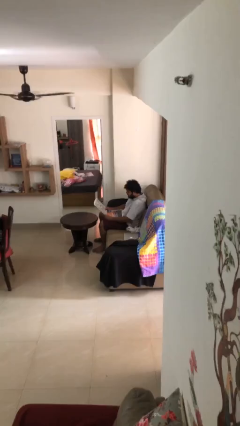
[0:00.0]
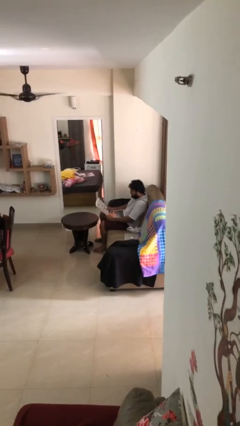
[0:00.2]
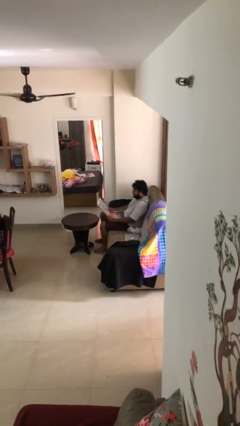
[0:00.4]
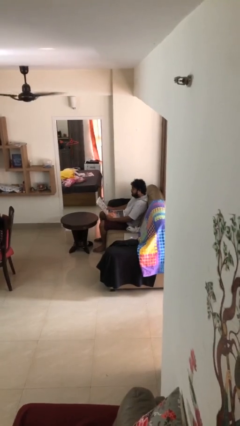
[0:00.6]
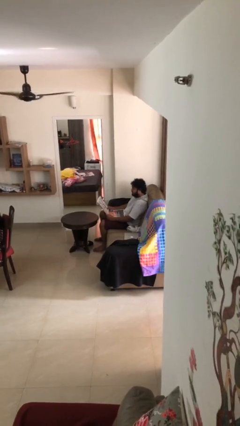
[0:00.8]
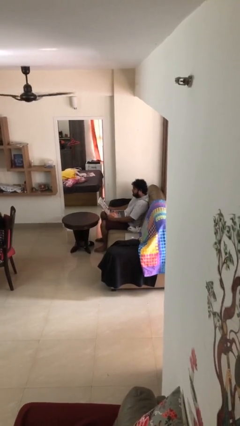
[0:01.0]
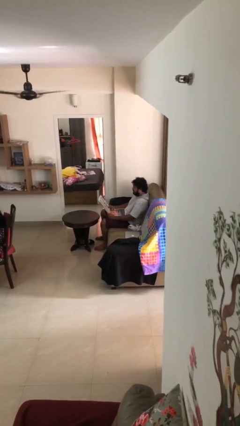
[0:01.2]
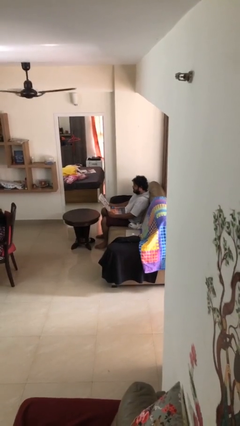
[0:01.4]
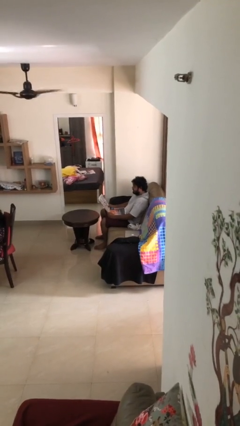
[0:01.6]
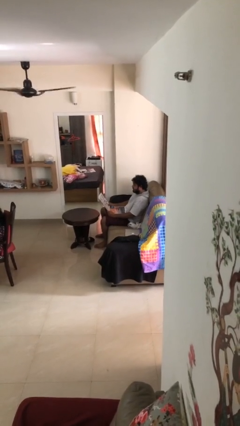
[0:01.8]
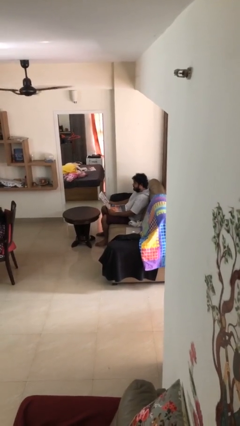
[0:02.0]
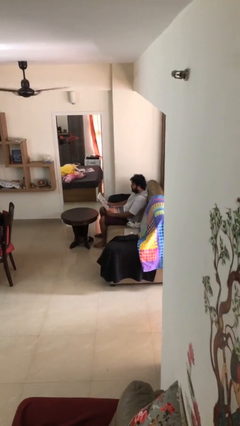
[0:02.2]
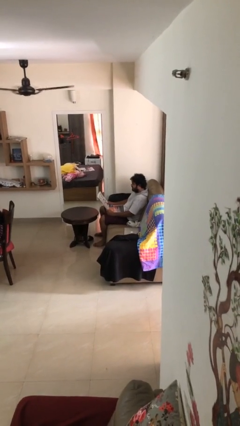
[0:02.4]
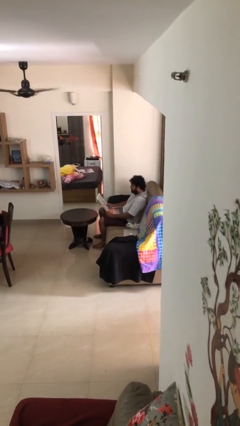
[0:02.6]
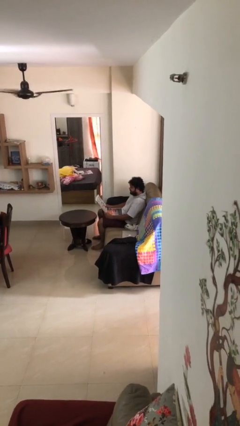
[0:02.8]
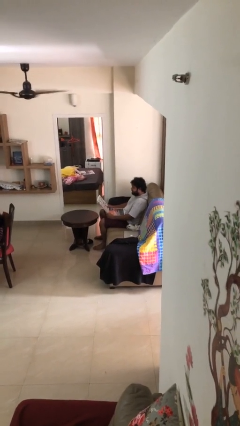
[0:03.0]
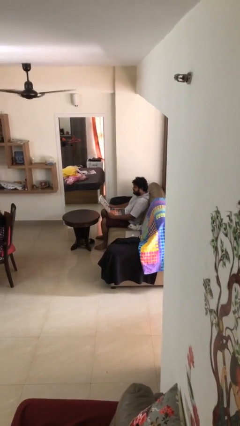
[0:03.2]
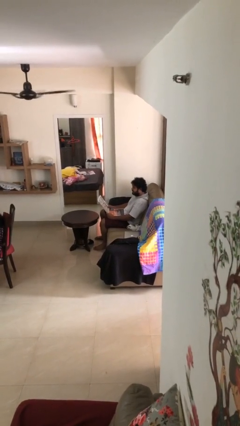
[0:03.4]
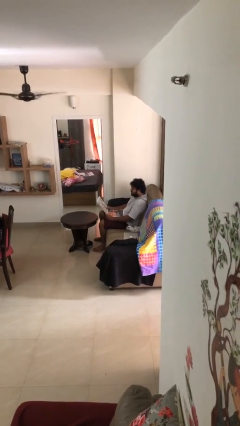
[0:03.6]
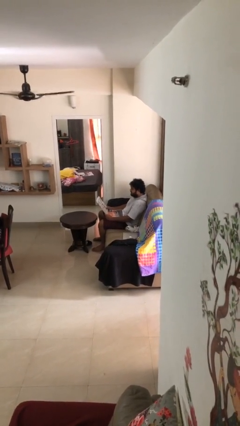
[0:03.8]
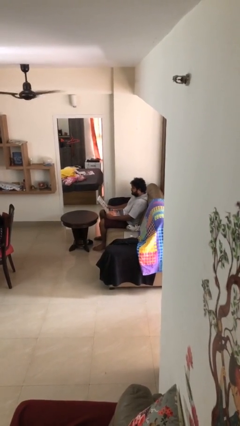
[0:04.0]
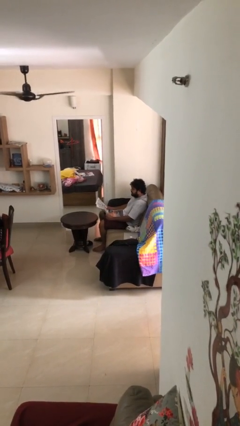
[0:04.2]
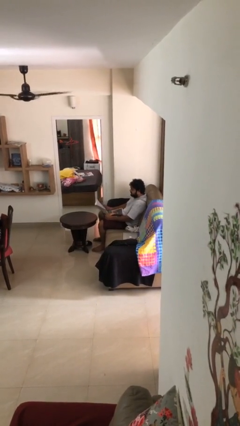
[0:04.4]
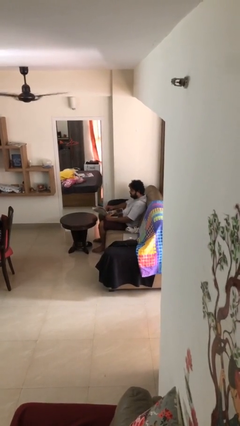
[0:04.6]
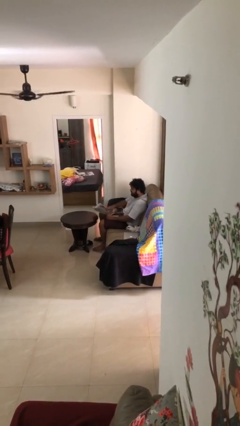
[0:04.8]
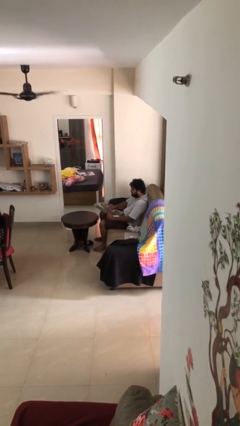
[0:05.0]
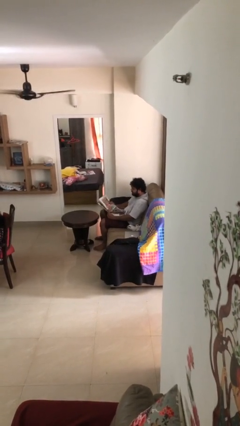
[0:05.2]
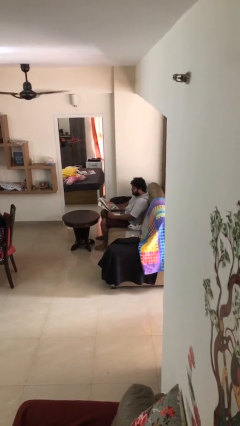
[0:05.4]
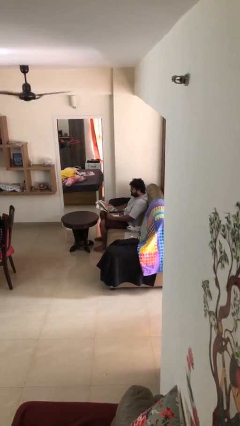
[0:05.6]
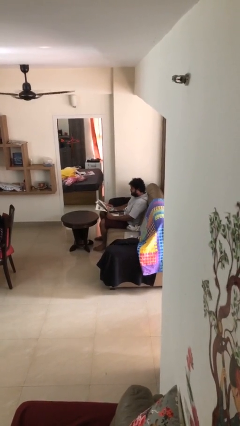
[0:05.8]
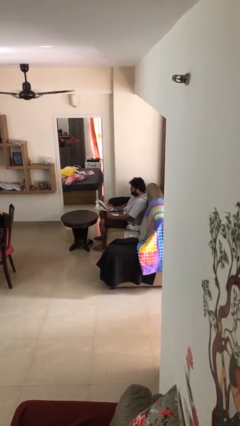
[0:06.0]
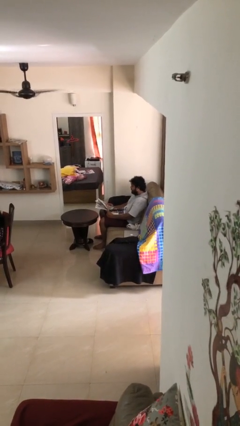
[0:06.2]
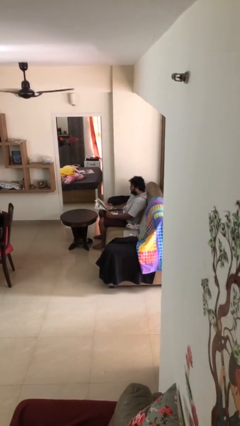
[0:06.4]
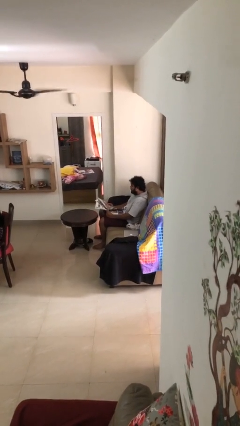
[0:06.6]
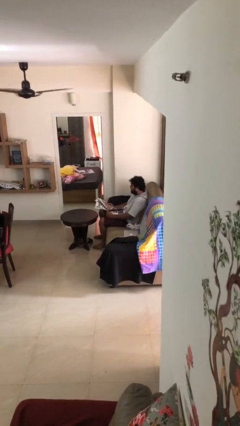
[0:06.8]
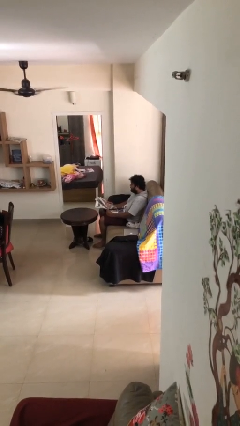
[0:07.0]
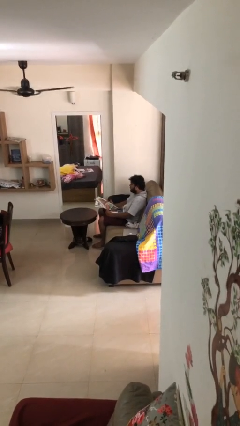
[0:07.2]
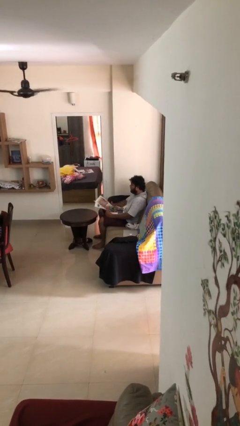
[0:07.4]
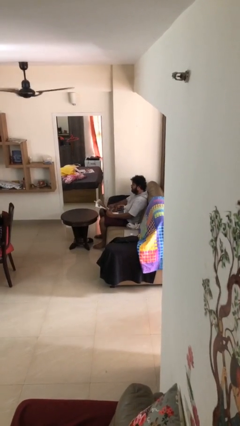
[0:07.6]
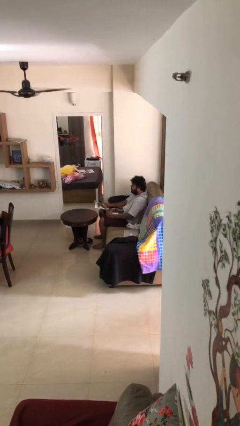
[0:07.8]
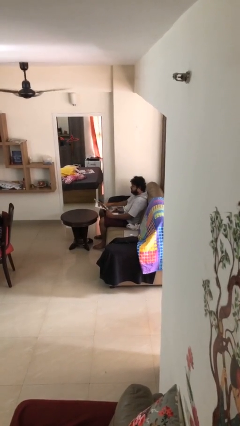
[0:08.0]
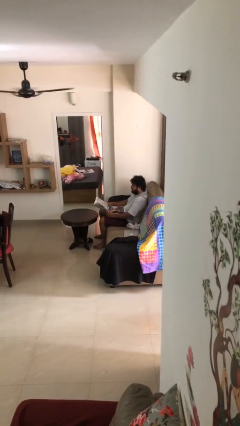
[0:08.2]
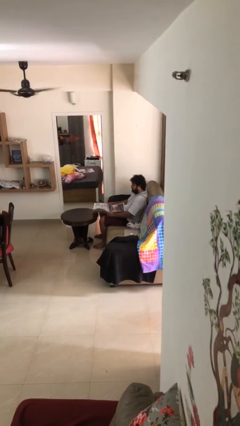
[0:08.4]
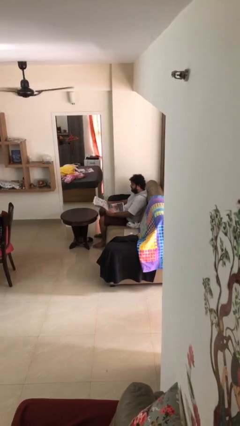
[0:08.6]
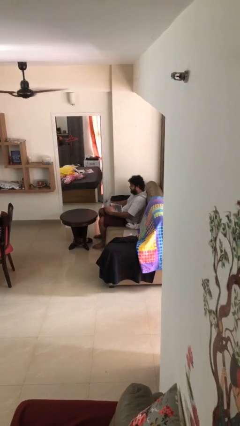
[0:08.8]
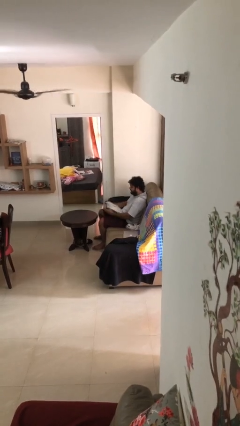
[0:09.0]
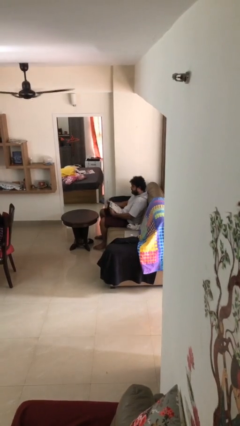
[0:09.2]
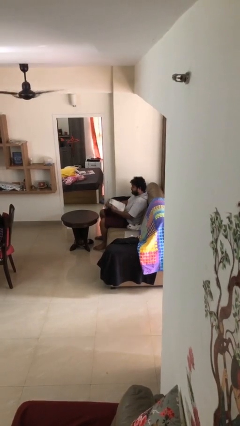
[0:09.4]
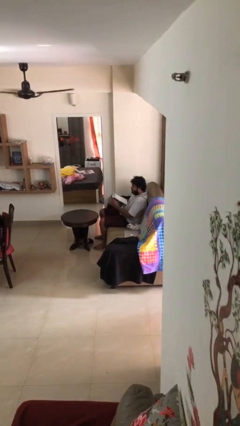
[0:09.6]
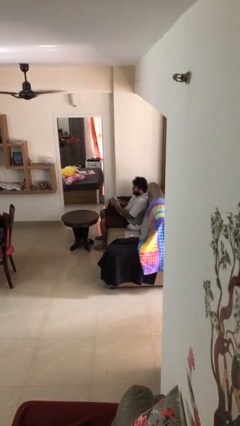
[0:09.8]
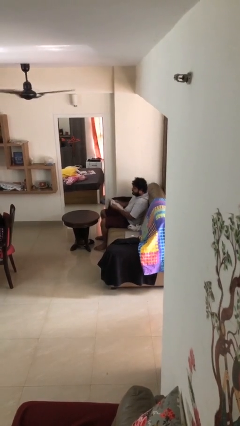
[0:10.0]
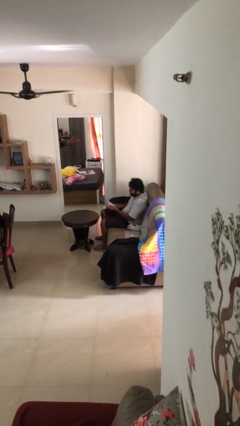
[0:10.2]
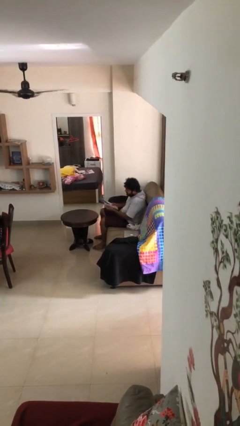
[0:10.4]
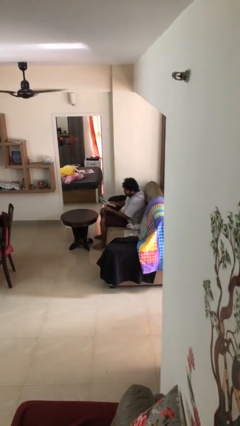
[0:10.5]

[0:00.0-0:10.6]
person reads document

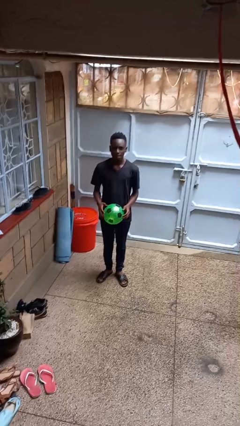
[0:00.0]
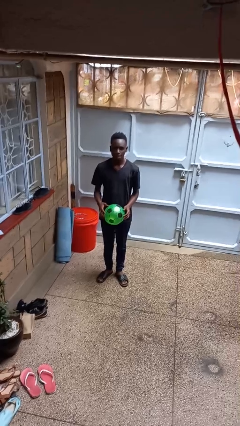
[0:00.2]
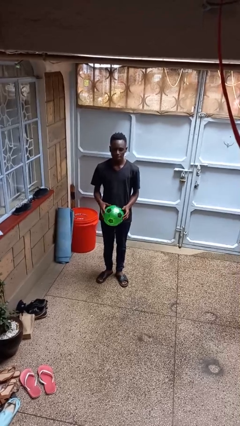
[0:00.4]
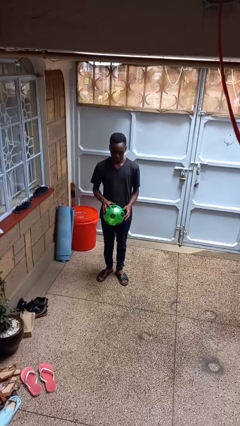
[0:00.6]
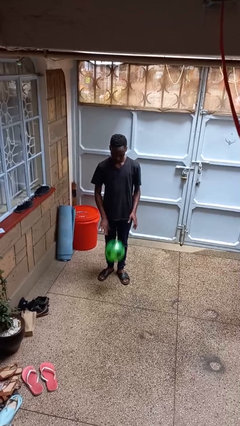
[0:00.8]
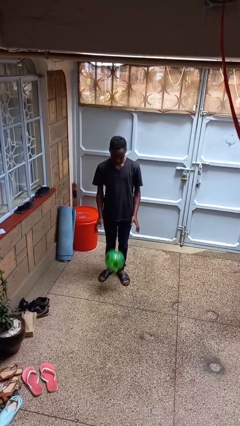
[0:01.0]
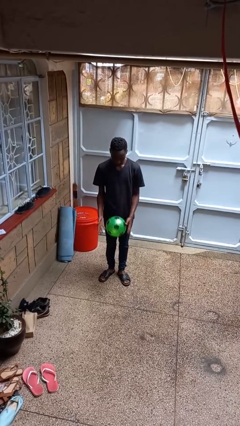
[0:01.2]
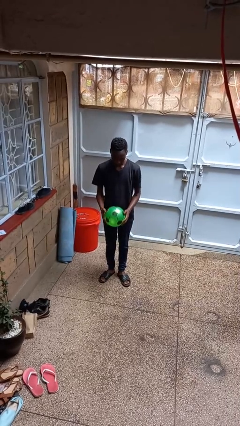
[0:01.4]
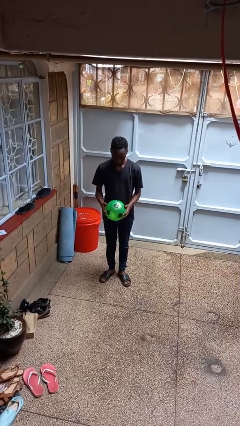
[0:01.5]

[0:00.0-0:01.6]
person bounces ball on floor

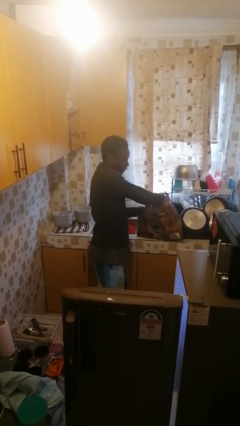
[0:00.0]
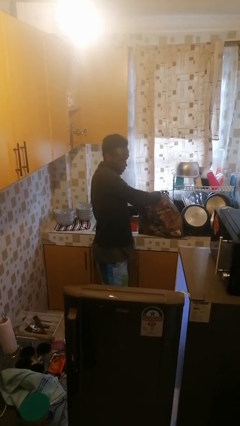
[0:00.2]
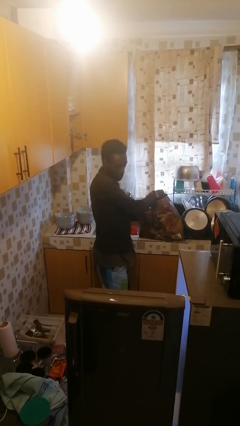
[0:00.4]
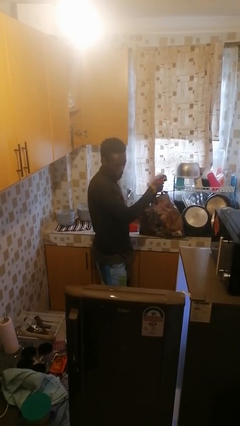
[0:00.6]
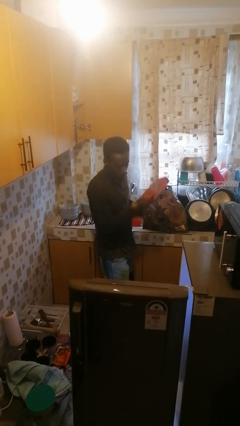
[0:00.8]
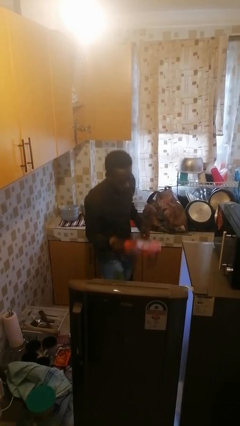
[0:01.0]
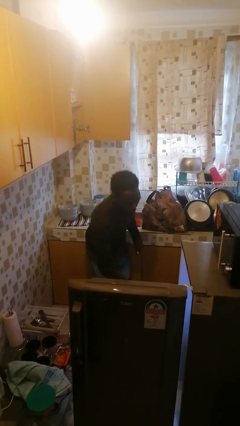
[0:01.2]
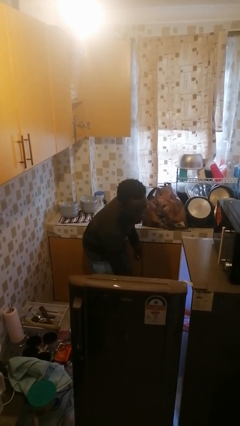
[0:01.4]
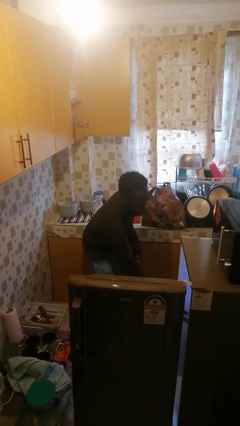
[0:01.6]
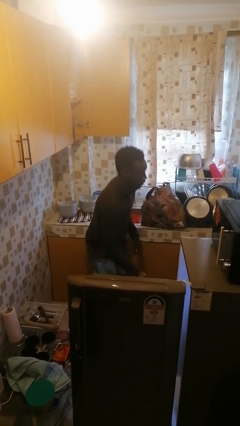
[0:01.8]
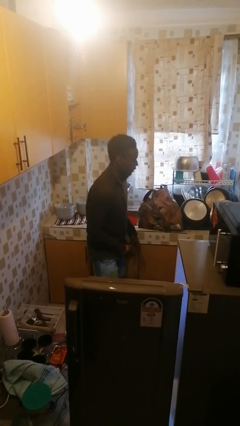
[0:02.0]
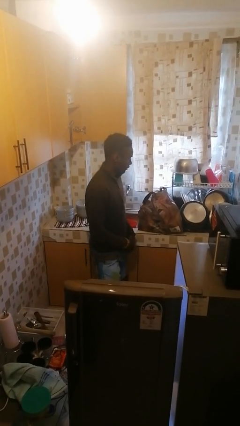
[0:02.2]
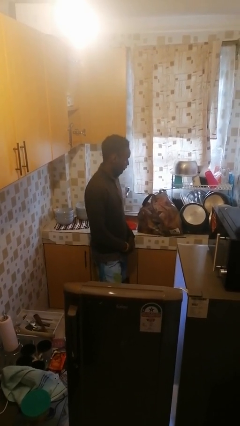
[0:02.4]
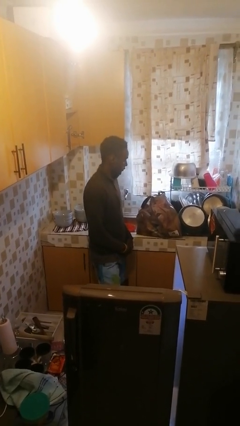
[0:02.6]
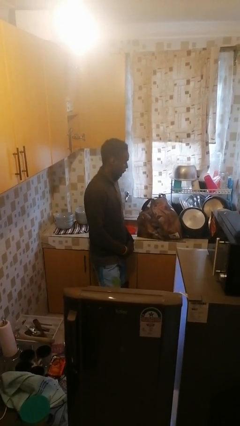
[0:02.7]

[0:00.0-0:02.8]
person loads groceries into refrigerator

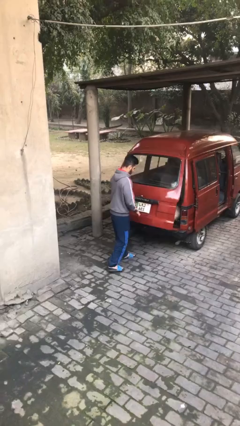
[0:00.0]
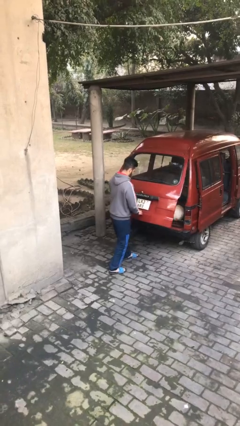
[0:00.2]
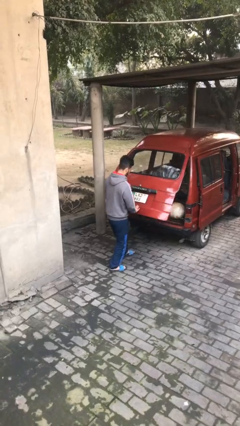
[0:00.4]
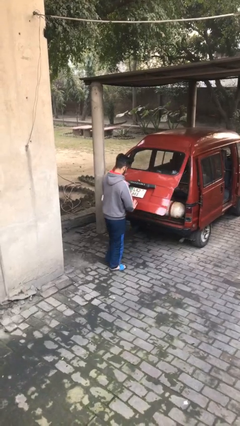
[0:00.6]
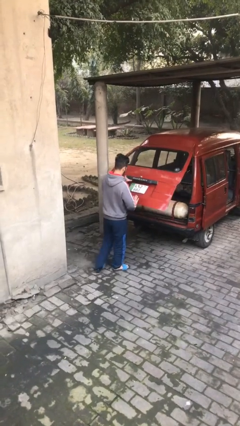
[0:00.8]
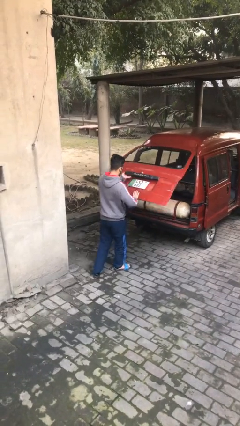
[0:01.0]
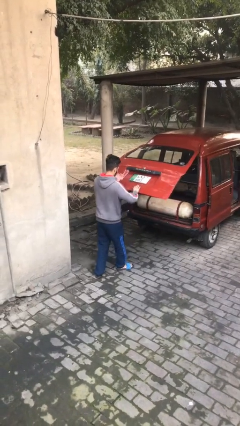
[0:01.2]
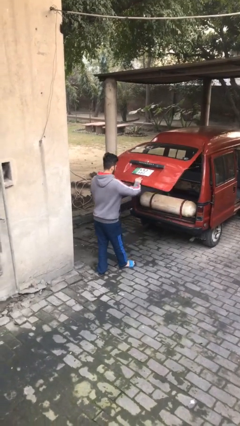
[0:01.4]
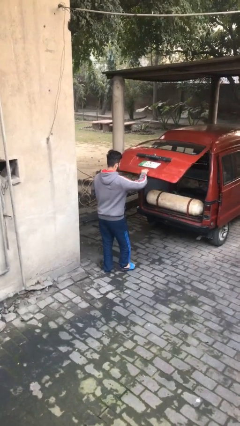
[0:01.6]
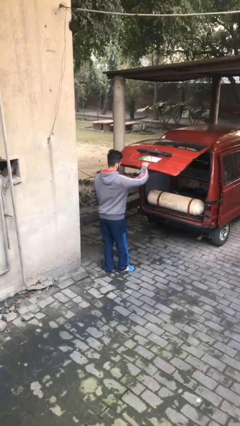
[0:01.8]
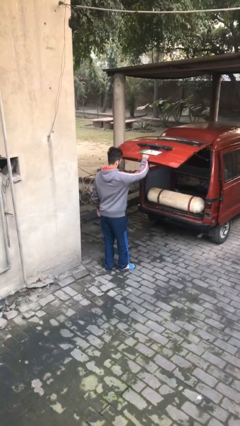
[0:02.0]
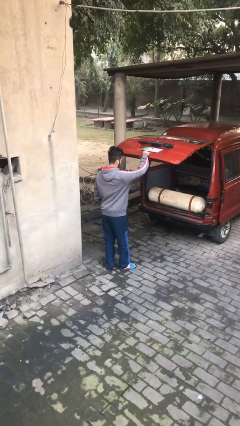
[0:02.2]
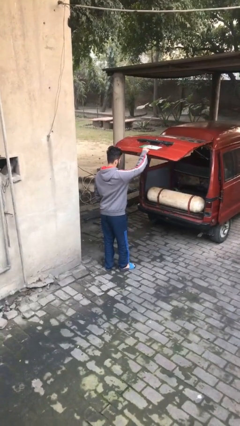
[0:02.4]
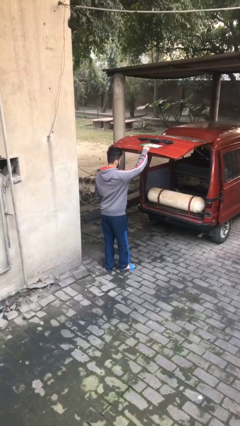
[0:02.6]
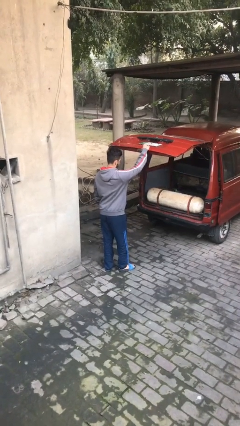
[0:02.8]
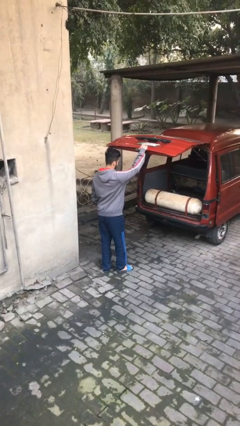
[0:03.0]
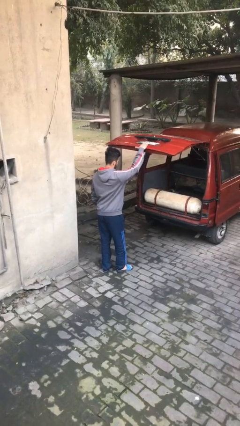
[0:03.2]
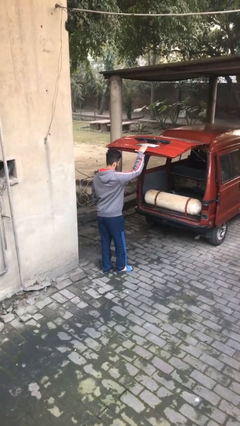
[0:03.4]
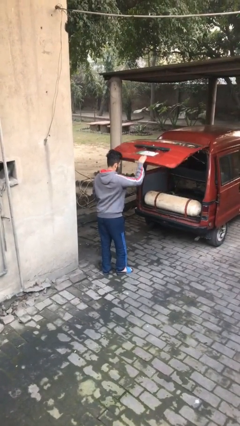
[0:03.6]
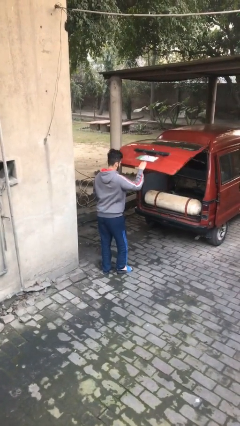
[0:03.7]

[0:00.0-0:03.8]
person opens car trunk
